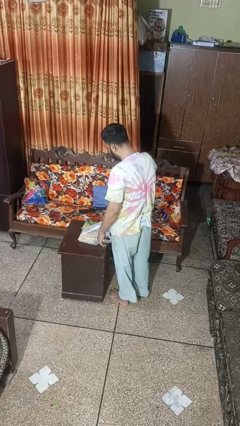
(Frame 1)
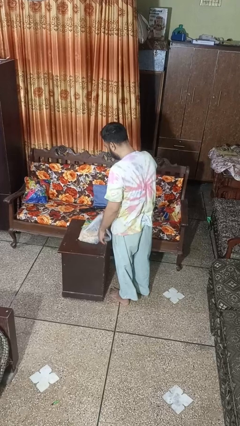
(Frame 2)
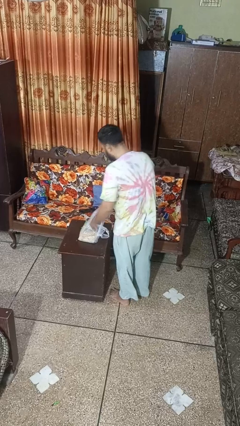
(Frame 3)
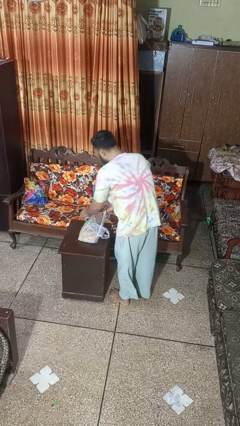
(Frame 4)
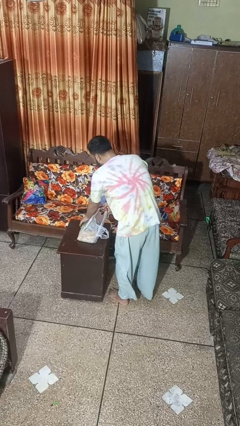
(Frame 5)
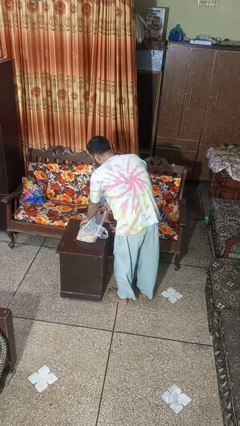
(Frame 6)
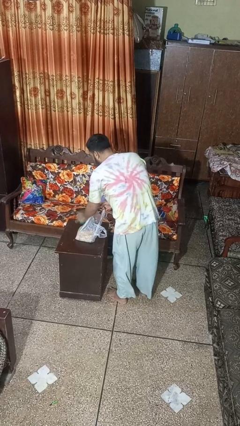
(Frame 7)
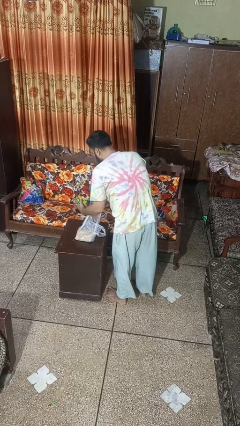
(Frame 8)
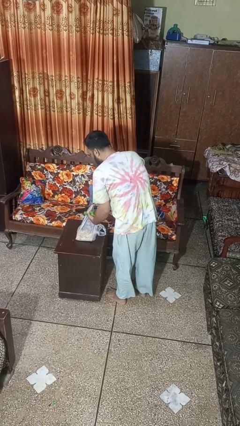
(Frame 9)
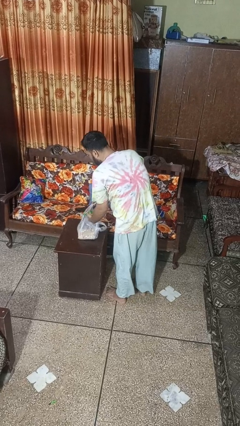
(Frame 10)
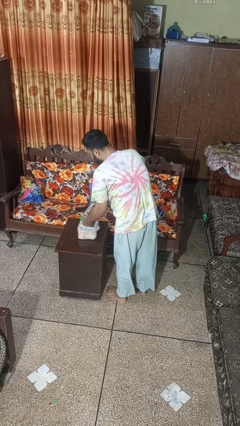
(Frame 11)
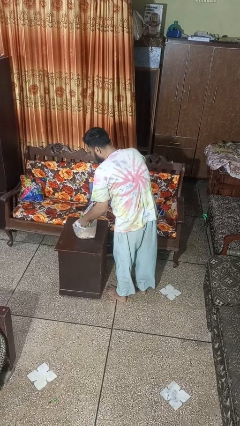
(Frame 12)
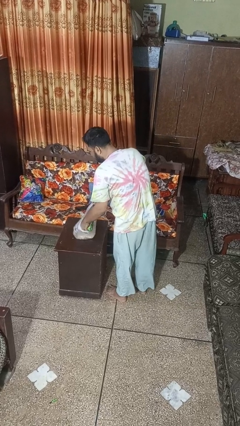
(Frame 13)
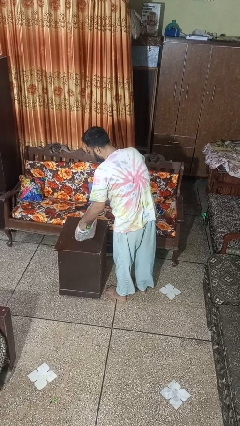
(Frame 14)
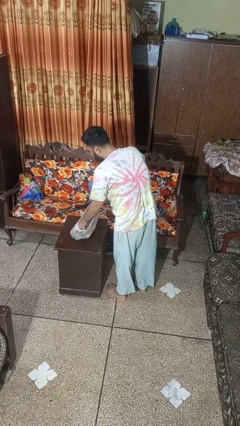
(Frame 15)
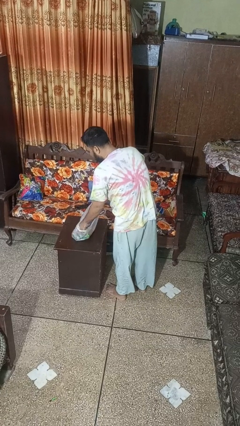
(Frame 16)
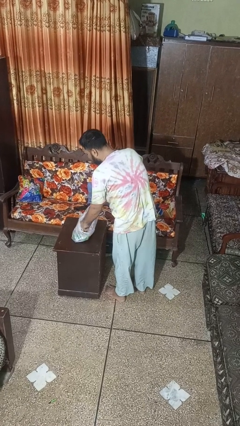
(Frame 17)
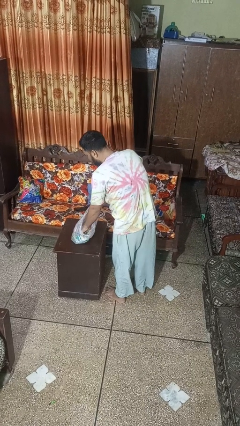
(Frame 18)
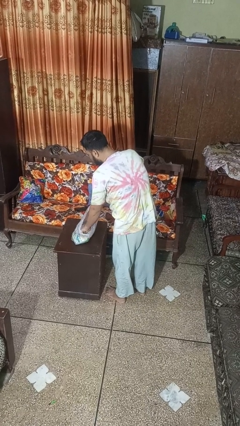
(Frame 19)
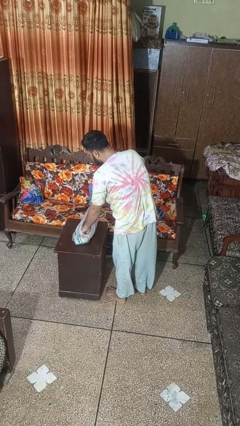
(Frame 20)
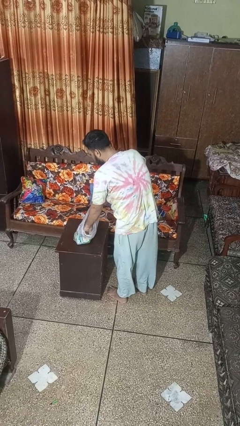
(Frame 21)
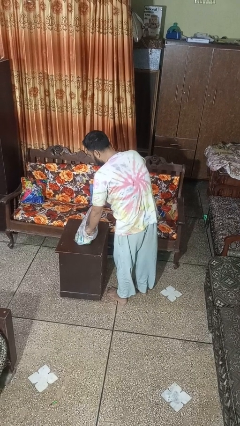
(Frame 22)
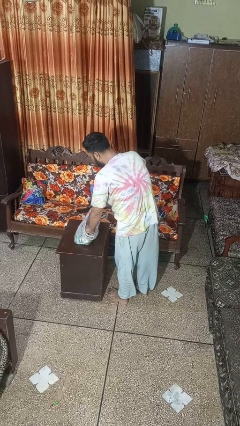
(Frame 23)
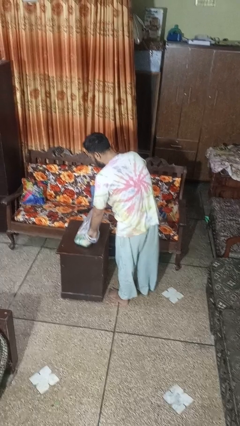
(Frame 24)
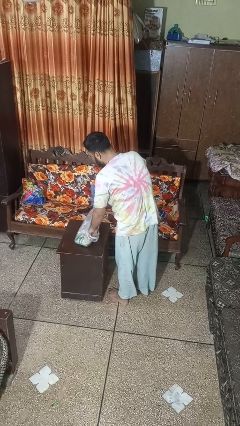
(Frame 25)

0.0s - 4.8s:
person puts object into bag

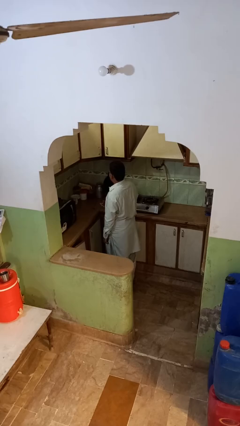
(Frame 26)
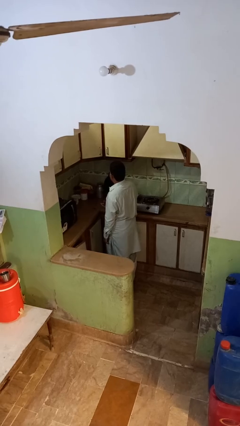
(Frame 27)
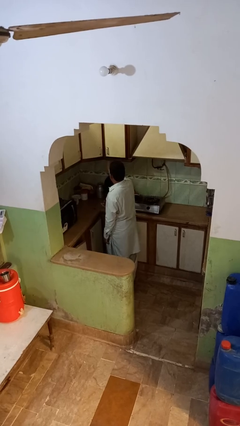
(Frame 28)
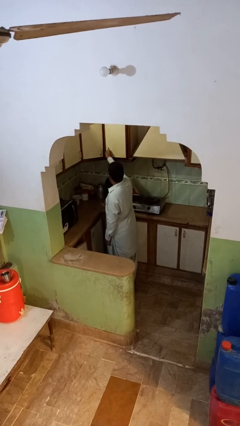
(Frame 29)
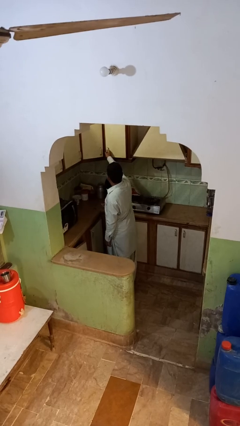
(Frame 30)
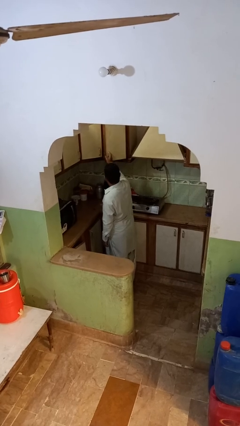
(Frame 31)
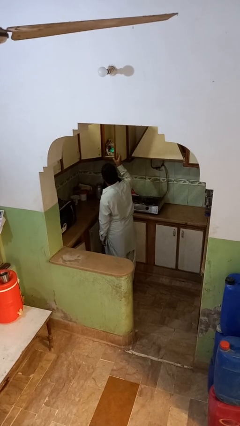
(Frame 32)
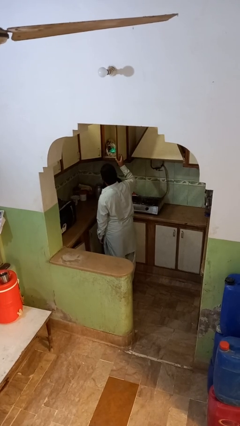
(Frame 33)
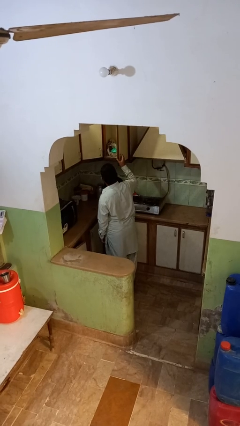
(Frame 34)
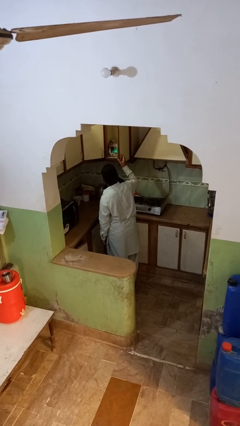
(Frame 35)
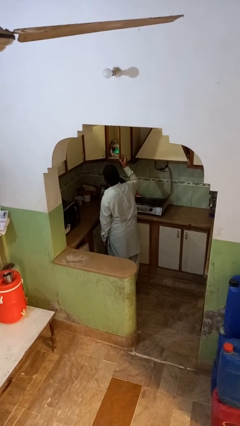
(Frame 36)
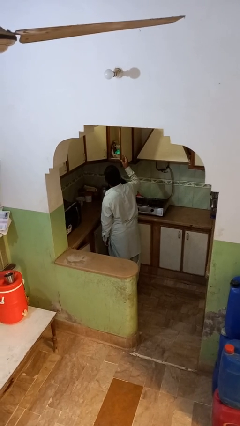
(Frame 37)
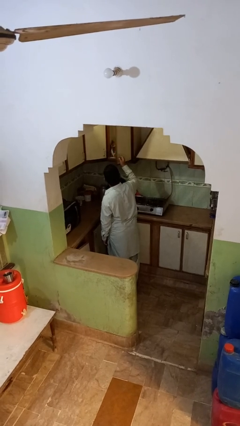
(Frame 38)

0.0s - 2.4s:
person opens cabinet

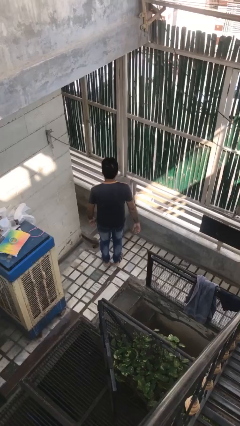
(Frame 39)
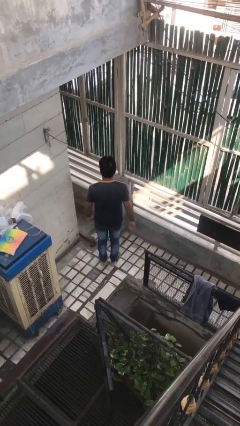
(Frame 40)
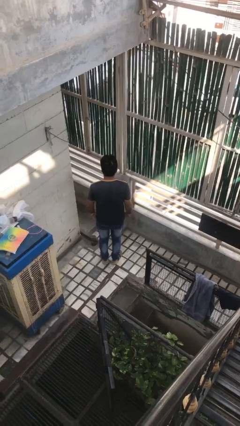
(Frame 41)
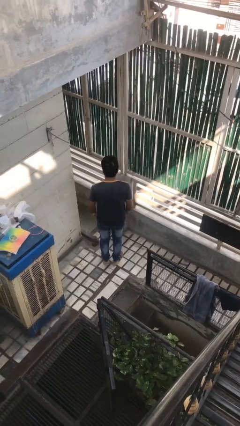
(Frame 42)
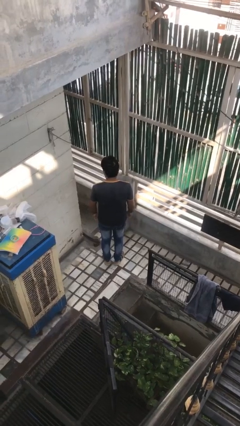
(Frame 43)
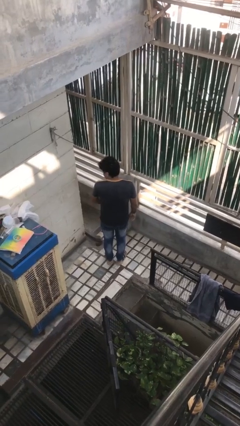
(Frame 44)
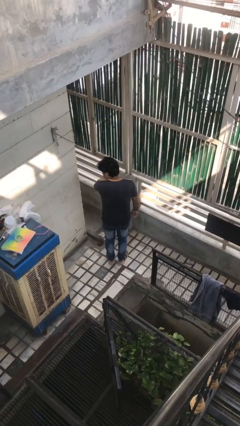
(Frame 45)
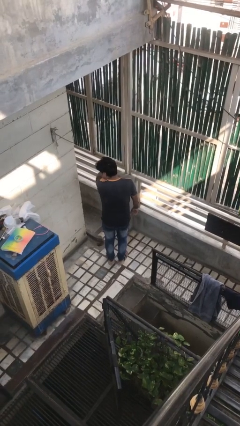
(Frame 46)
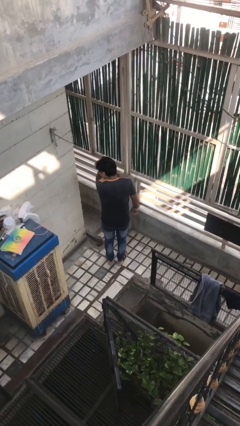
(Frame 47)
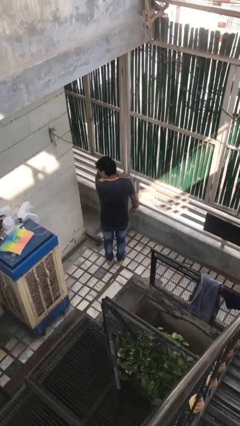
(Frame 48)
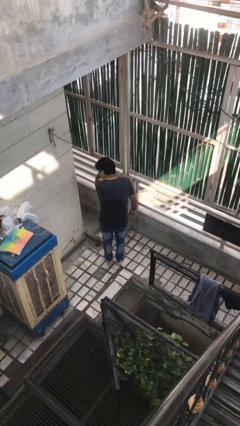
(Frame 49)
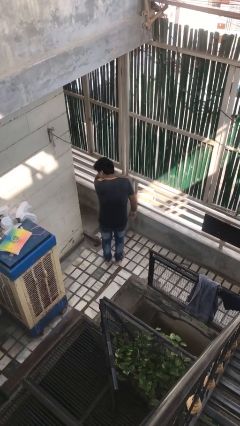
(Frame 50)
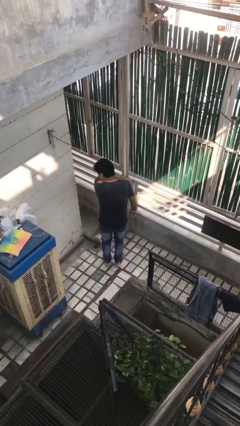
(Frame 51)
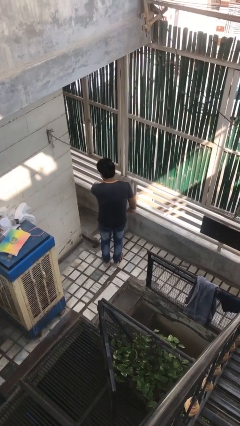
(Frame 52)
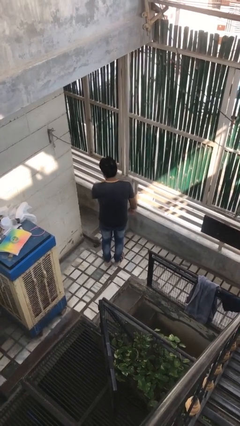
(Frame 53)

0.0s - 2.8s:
person sneezes into arm

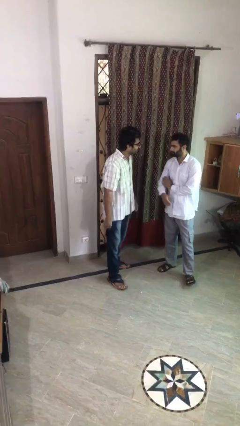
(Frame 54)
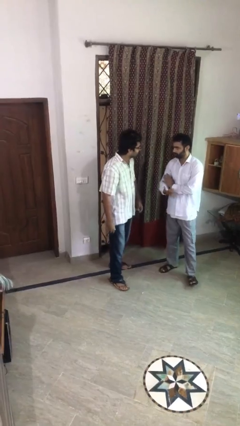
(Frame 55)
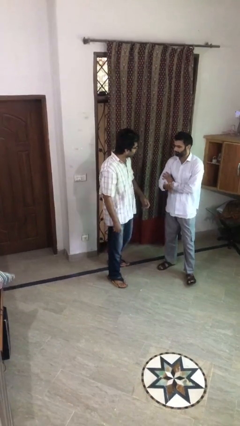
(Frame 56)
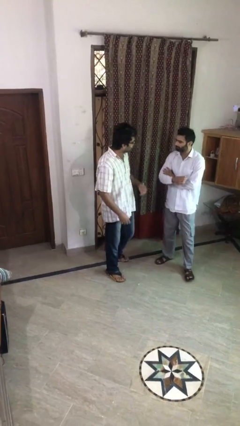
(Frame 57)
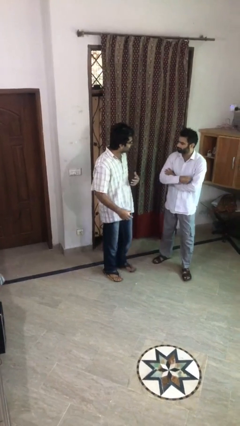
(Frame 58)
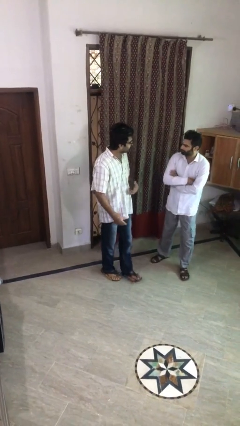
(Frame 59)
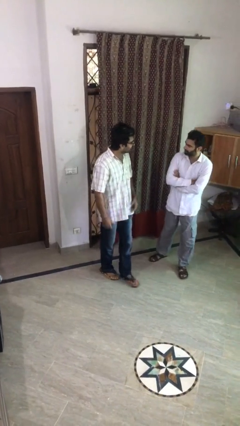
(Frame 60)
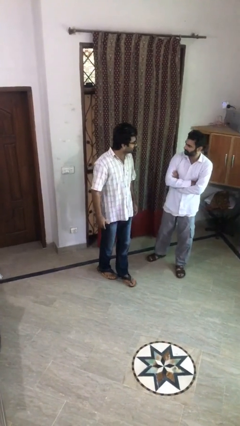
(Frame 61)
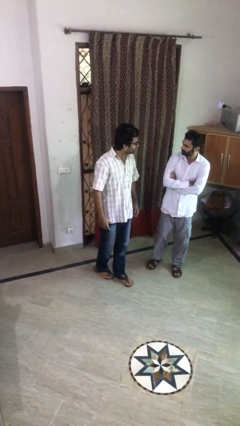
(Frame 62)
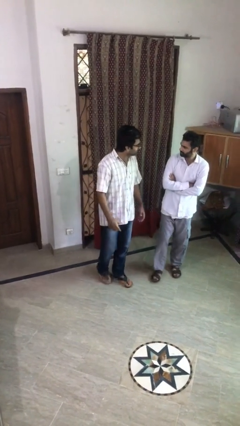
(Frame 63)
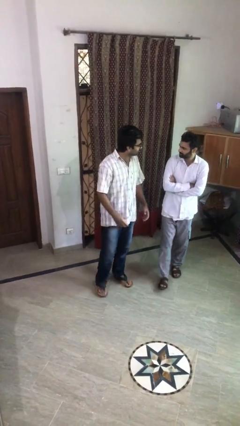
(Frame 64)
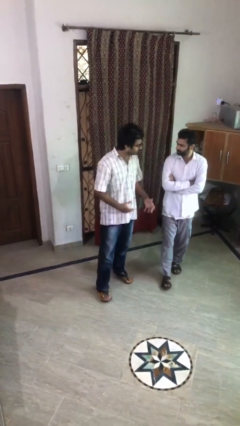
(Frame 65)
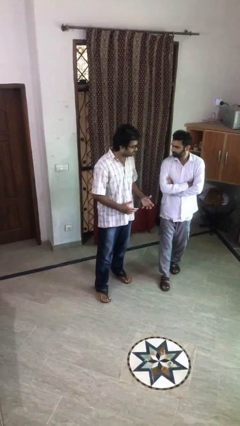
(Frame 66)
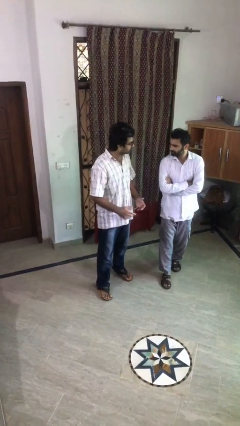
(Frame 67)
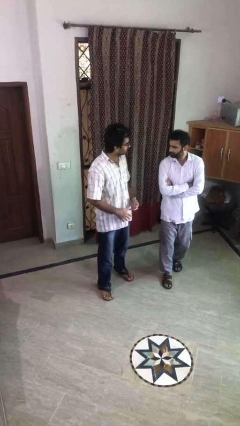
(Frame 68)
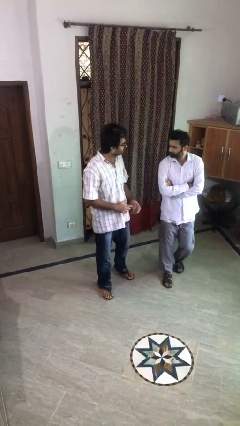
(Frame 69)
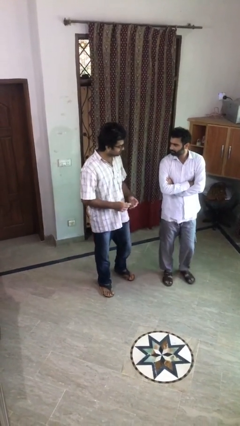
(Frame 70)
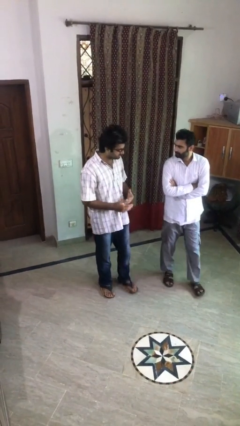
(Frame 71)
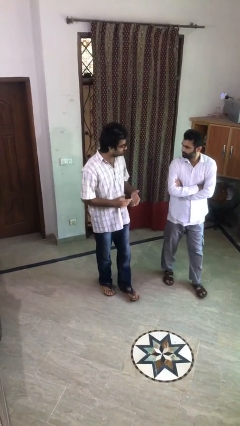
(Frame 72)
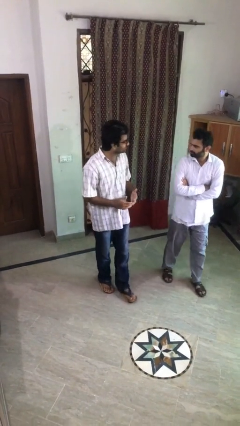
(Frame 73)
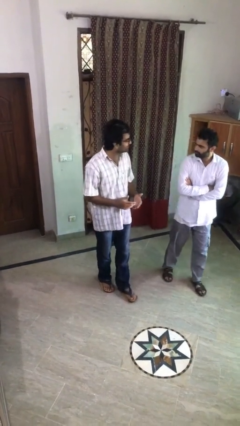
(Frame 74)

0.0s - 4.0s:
person talks to person

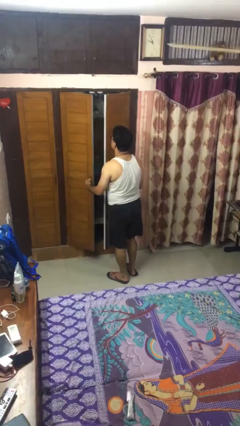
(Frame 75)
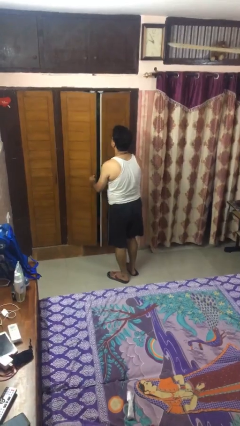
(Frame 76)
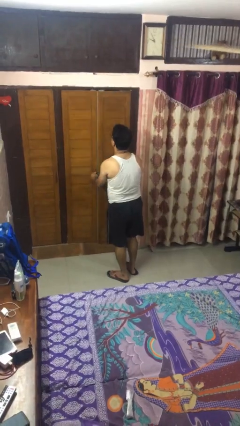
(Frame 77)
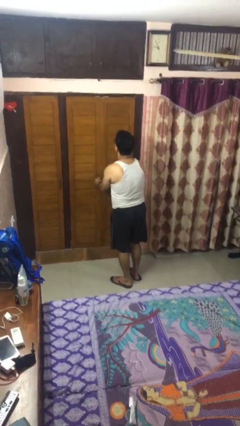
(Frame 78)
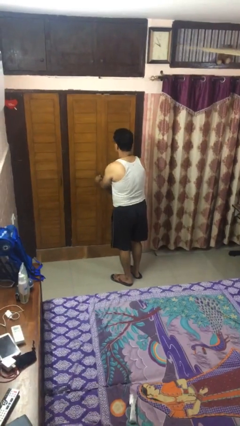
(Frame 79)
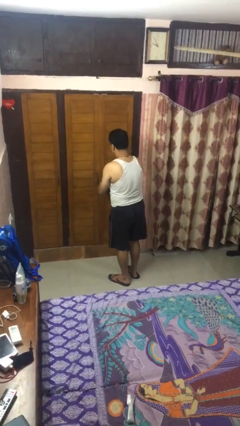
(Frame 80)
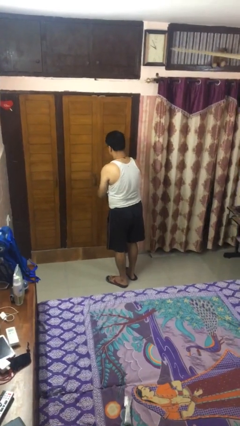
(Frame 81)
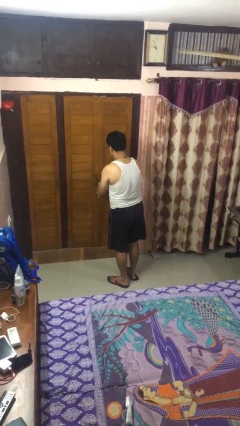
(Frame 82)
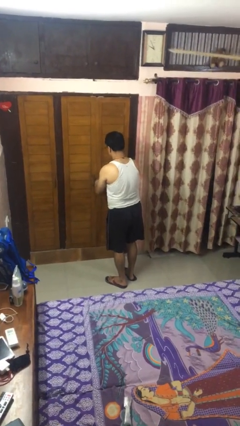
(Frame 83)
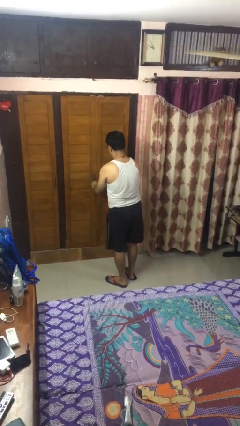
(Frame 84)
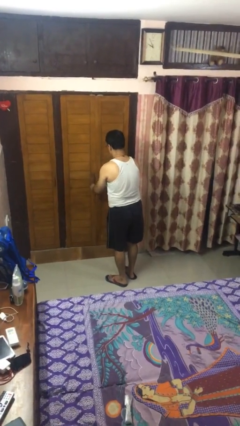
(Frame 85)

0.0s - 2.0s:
person closes facility door

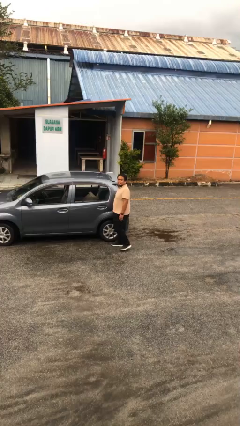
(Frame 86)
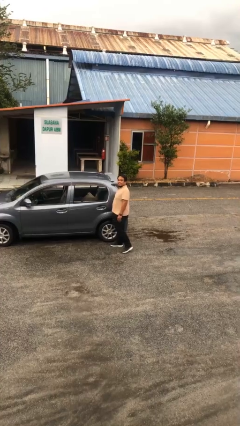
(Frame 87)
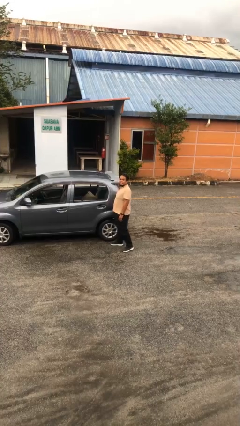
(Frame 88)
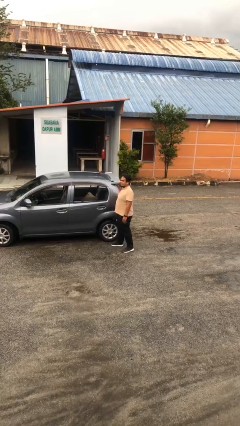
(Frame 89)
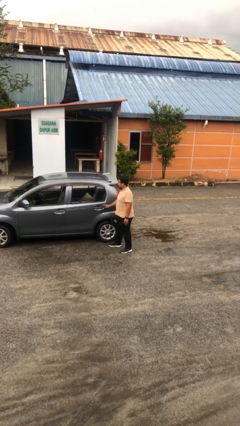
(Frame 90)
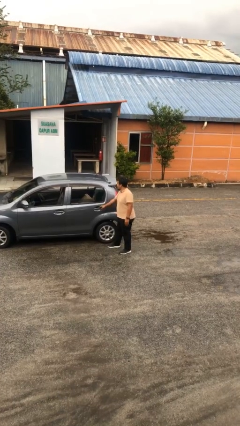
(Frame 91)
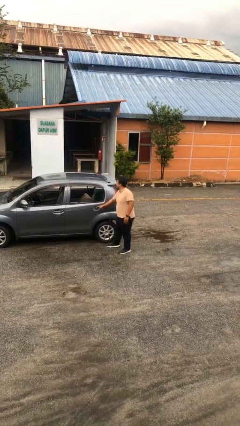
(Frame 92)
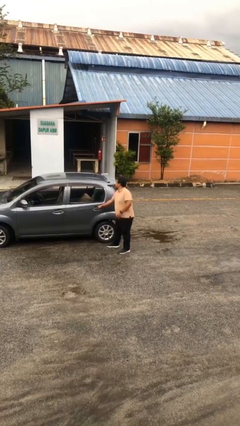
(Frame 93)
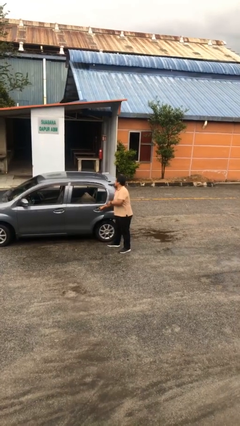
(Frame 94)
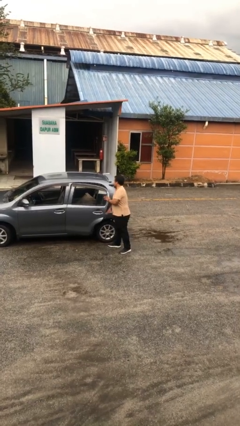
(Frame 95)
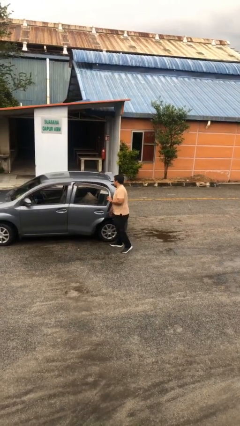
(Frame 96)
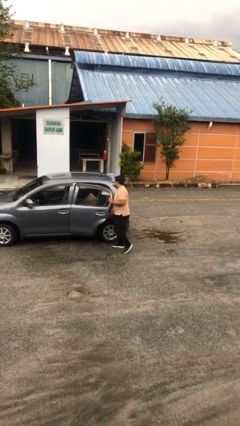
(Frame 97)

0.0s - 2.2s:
person opens car door
